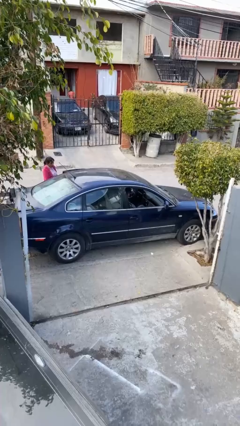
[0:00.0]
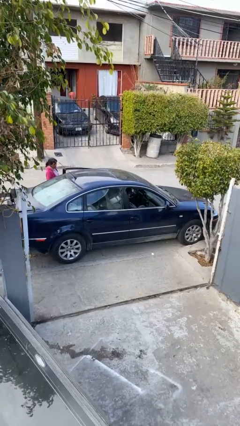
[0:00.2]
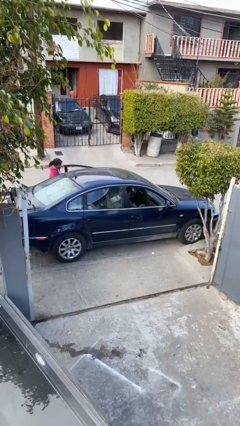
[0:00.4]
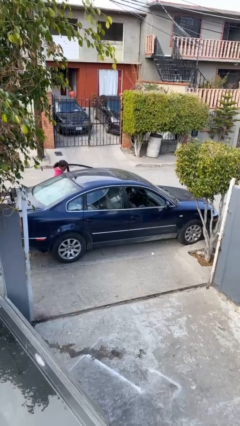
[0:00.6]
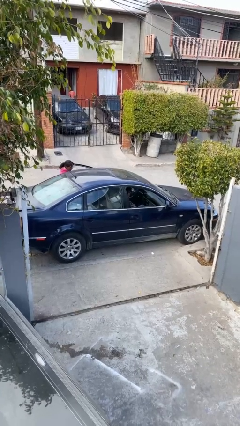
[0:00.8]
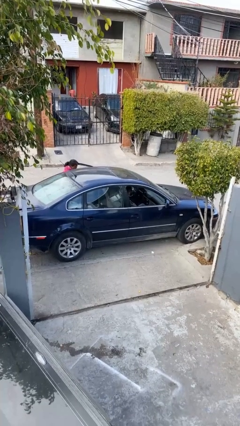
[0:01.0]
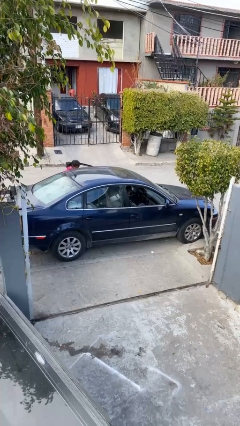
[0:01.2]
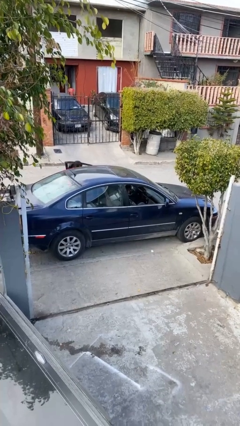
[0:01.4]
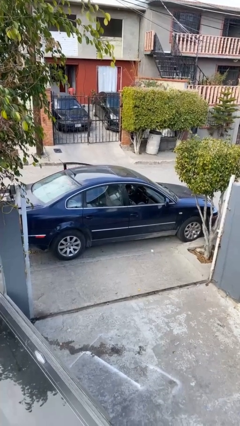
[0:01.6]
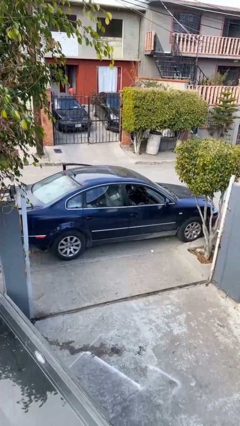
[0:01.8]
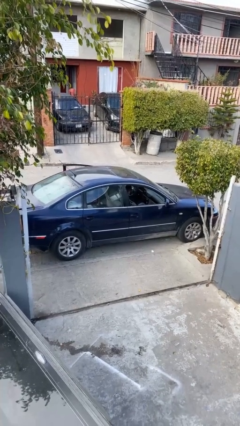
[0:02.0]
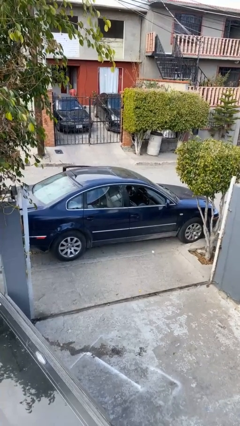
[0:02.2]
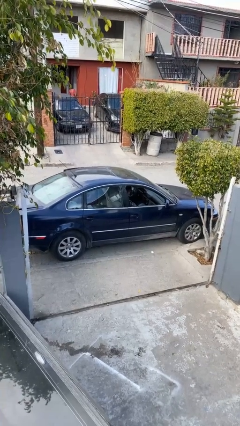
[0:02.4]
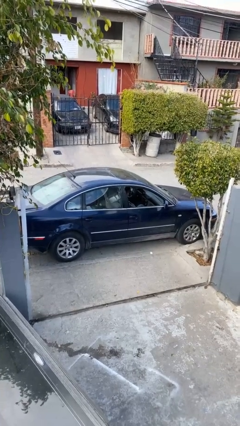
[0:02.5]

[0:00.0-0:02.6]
car picks up person

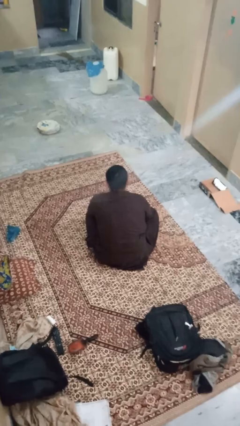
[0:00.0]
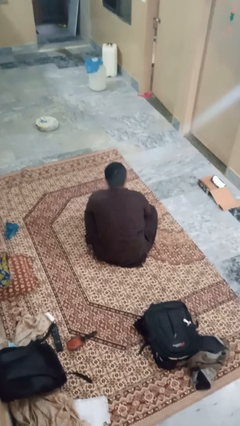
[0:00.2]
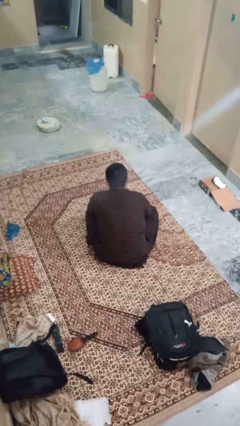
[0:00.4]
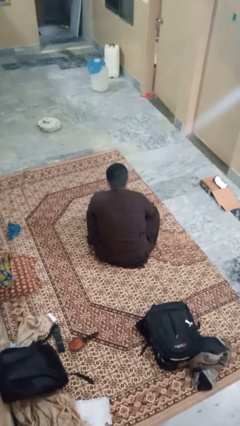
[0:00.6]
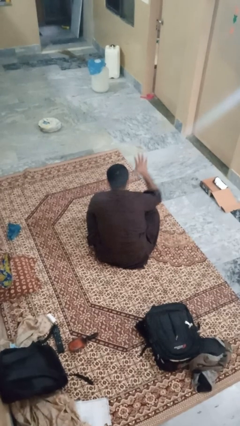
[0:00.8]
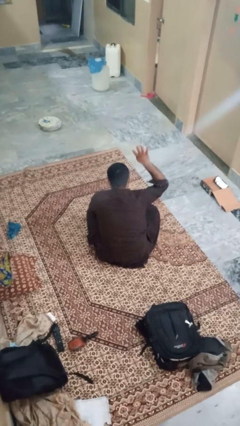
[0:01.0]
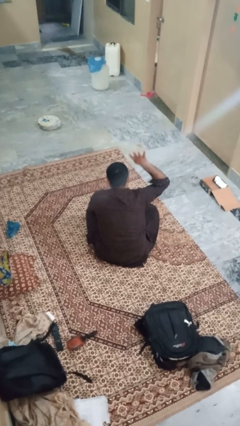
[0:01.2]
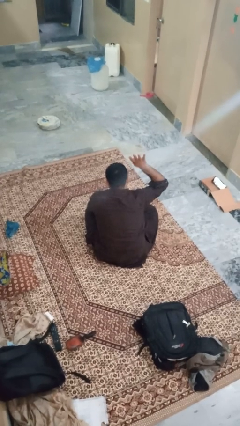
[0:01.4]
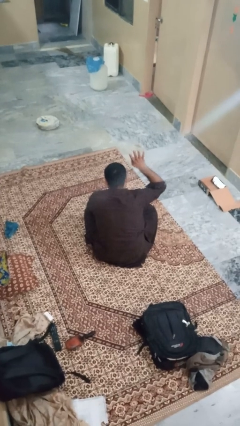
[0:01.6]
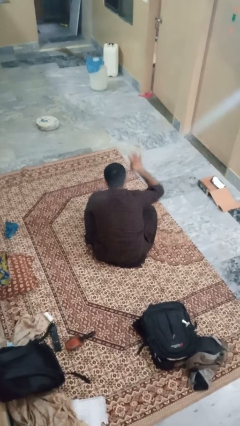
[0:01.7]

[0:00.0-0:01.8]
person gestures number four

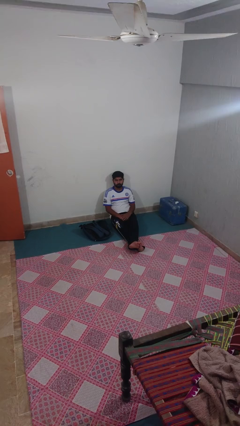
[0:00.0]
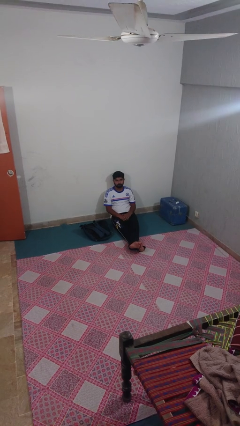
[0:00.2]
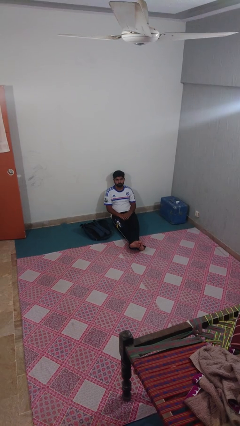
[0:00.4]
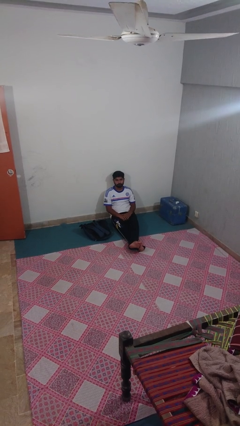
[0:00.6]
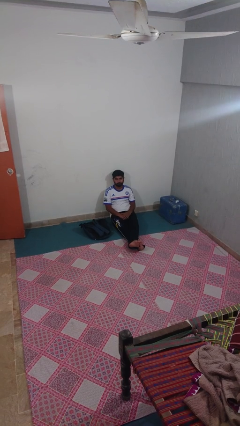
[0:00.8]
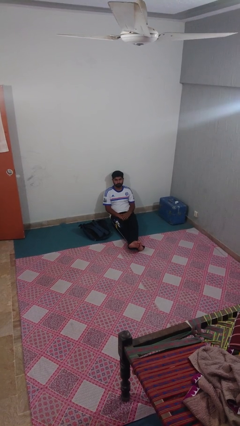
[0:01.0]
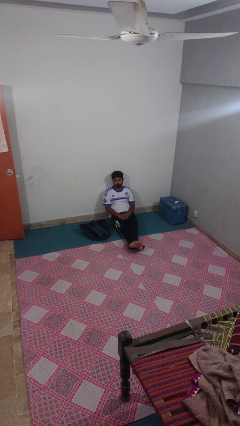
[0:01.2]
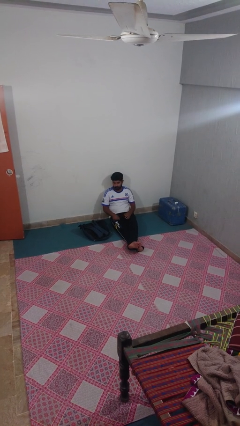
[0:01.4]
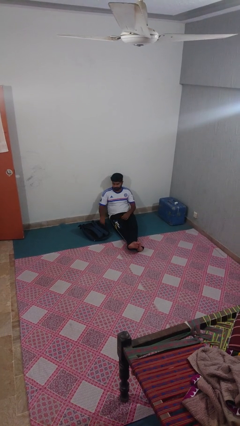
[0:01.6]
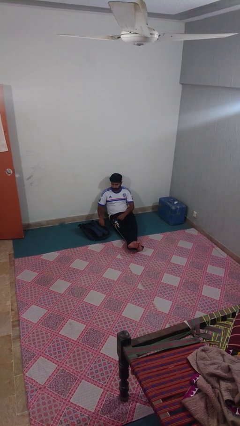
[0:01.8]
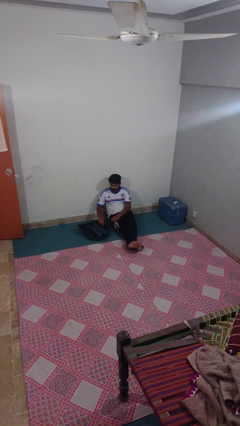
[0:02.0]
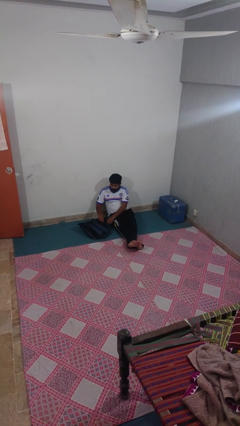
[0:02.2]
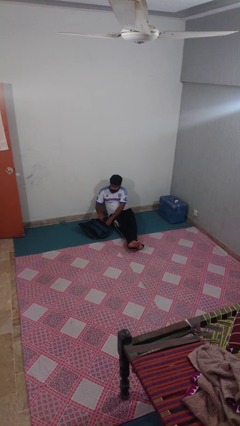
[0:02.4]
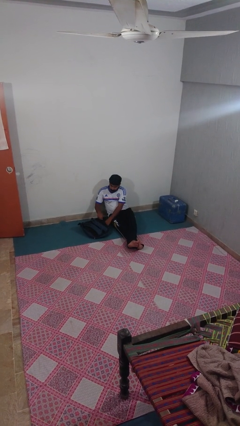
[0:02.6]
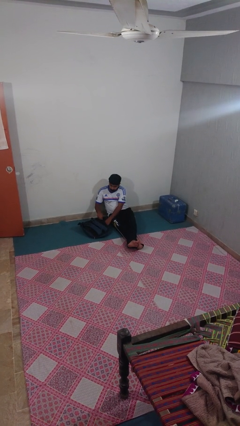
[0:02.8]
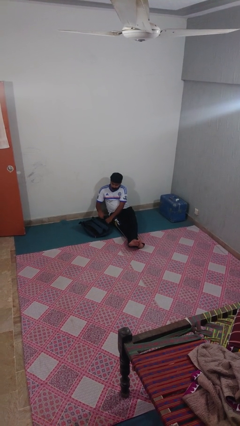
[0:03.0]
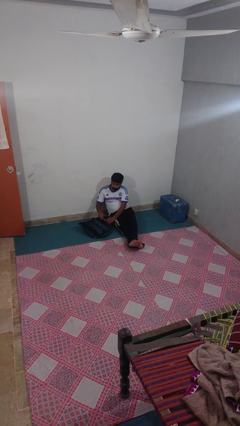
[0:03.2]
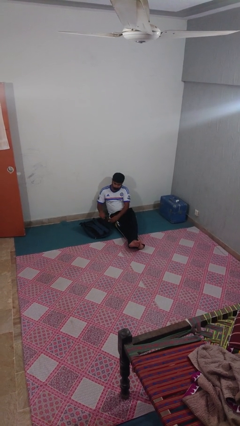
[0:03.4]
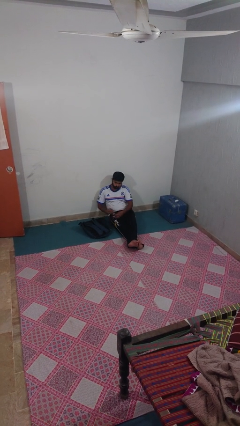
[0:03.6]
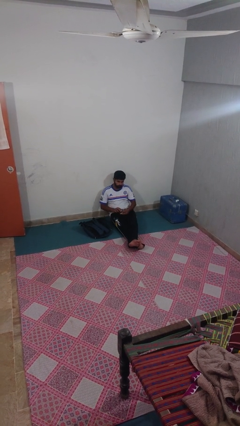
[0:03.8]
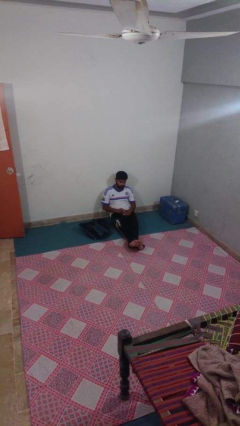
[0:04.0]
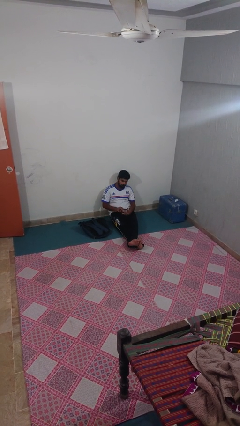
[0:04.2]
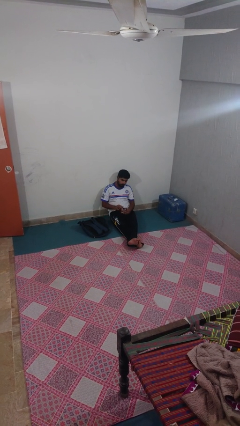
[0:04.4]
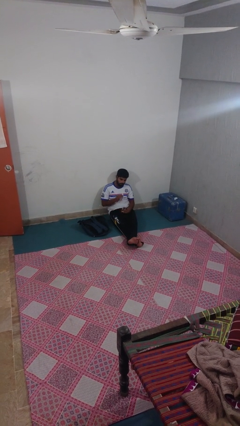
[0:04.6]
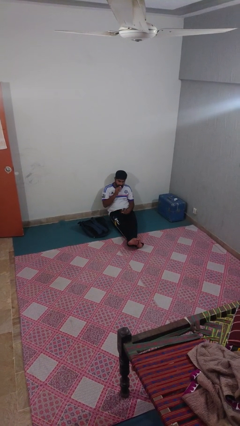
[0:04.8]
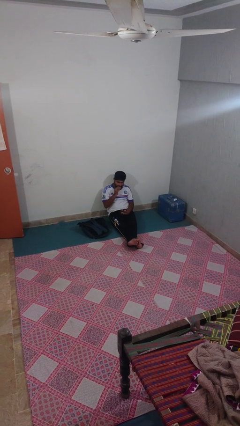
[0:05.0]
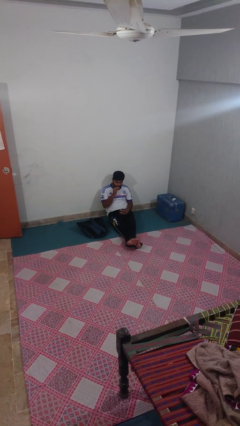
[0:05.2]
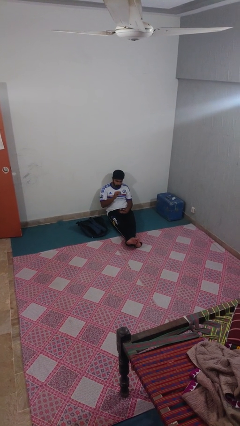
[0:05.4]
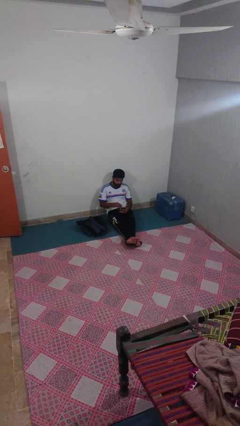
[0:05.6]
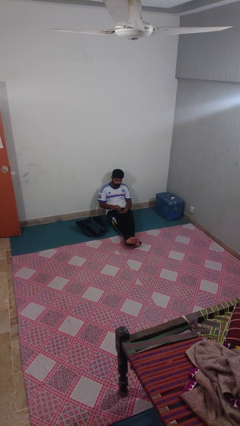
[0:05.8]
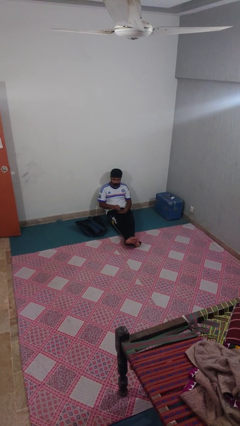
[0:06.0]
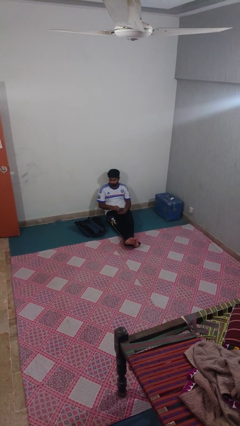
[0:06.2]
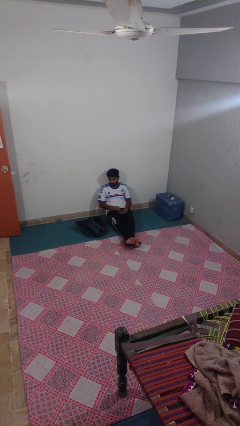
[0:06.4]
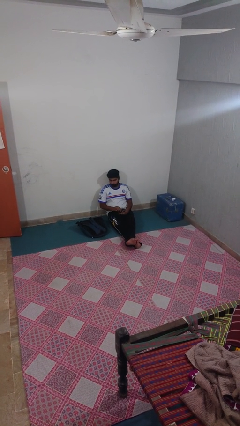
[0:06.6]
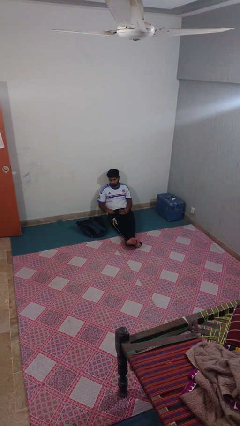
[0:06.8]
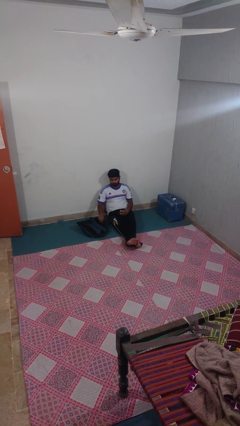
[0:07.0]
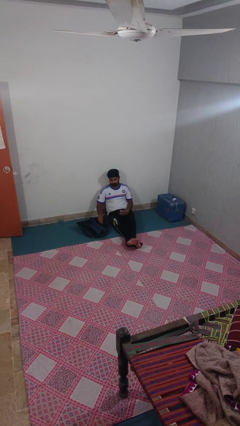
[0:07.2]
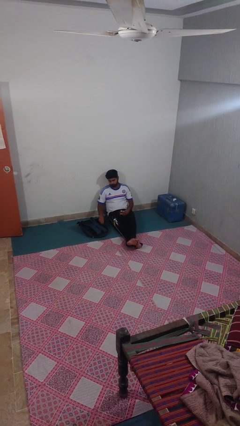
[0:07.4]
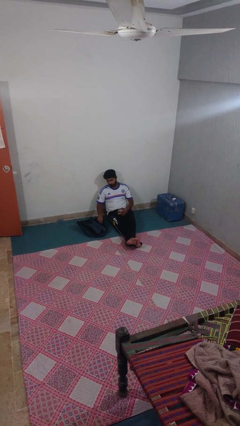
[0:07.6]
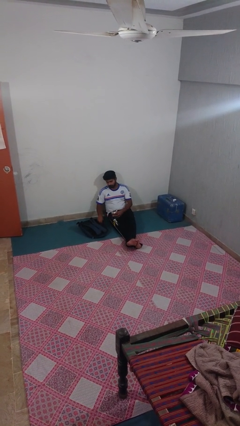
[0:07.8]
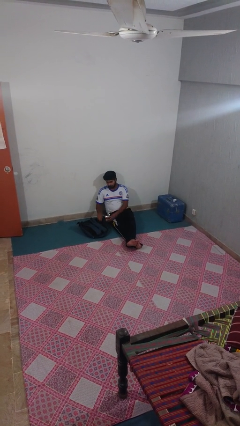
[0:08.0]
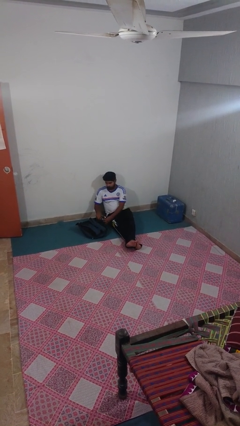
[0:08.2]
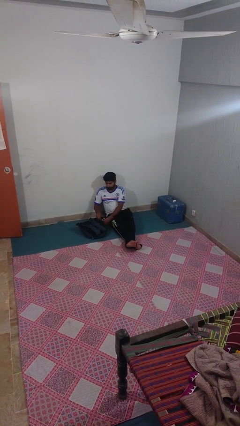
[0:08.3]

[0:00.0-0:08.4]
person eats snack from bag

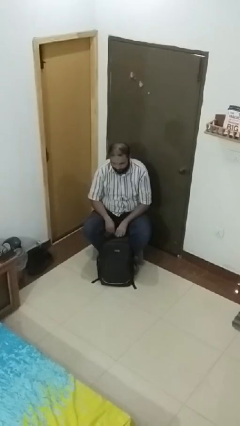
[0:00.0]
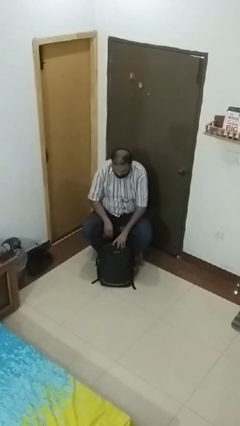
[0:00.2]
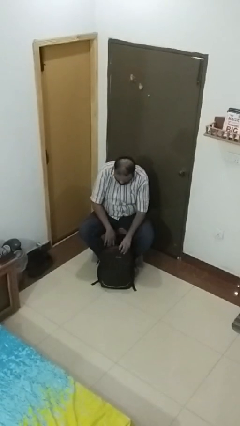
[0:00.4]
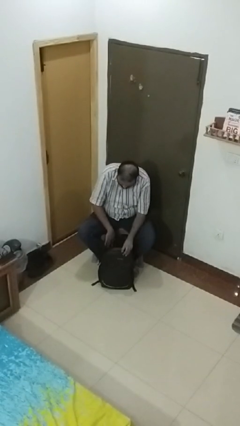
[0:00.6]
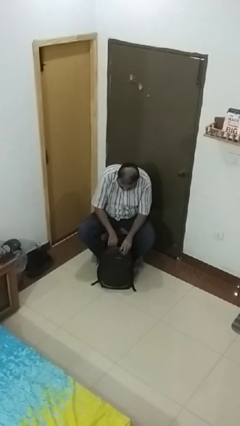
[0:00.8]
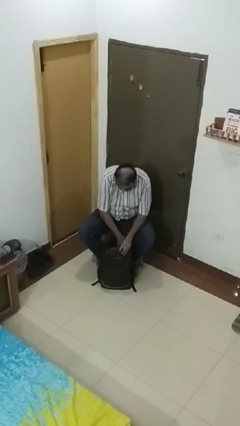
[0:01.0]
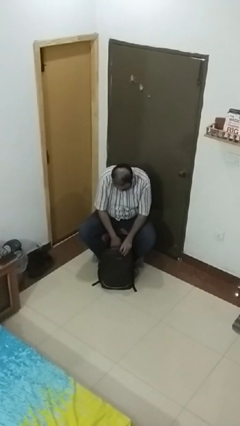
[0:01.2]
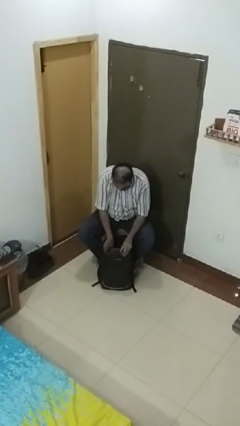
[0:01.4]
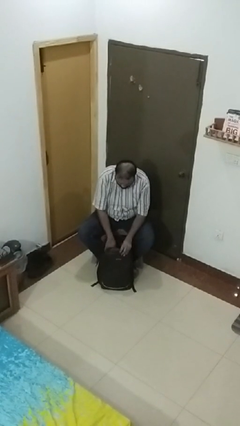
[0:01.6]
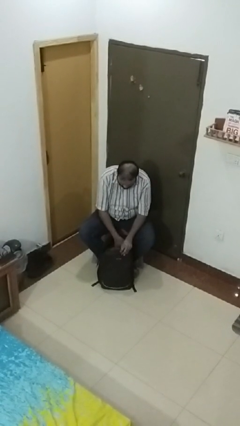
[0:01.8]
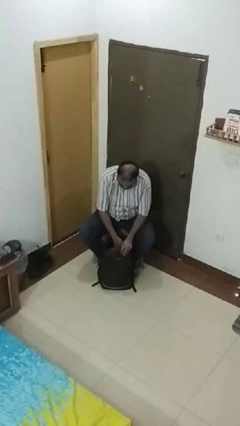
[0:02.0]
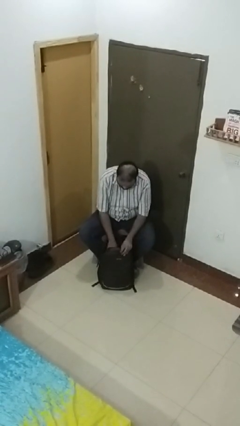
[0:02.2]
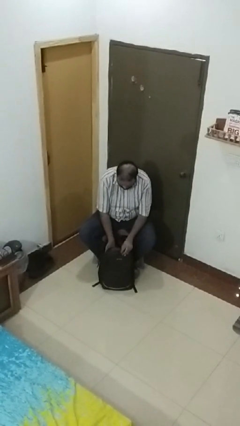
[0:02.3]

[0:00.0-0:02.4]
person searches in backpack

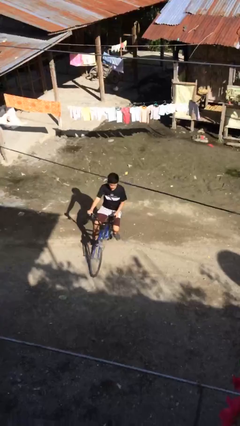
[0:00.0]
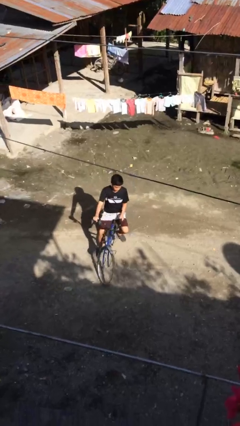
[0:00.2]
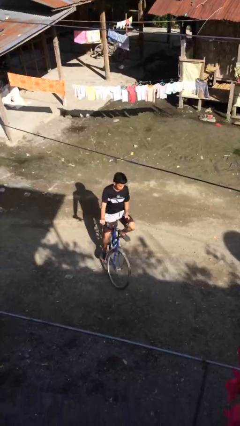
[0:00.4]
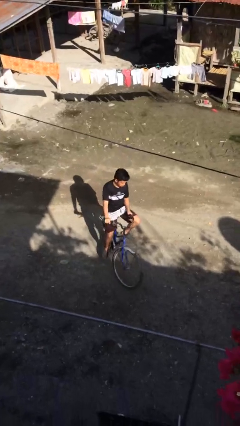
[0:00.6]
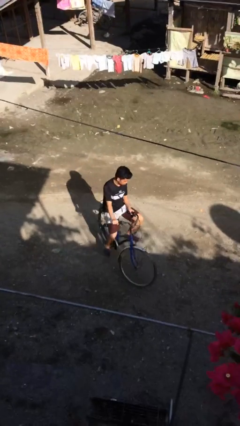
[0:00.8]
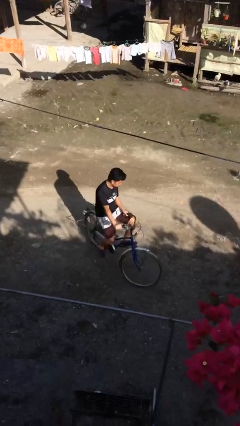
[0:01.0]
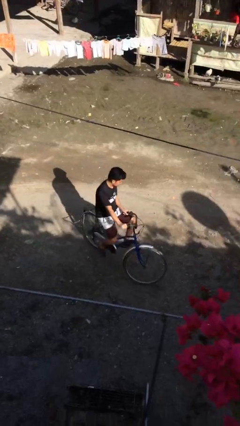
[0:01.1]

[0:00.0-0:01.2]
person rides bicycle

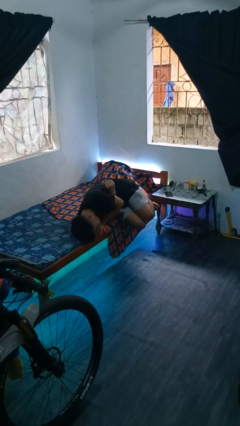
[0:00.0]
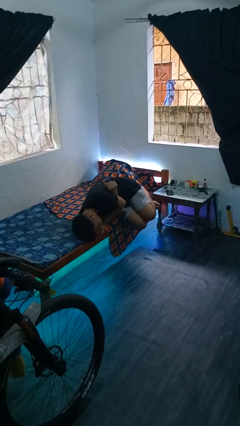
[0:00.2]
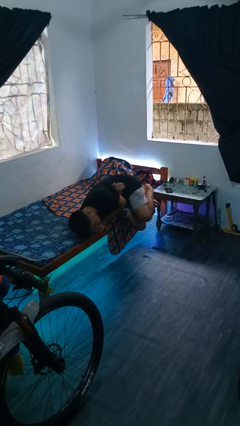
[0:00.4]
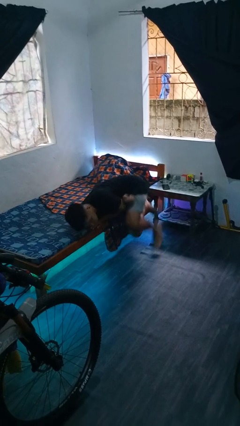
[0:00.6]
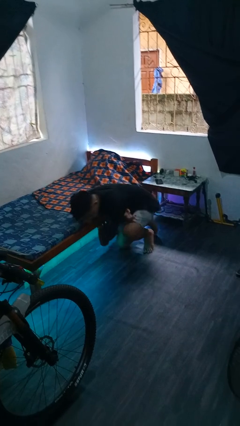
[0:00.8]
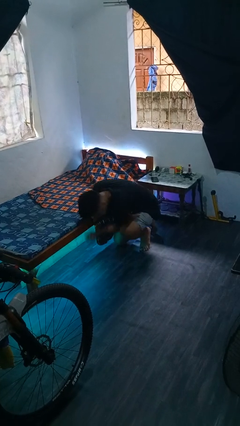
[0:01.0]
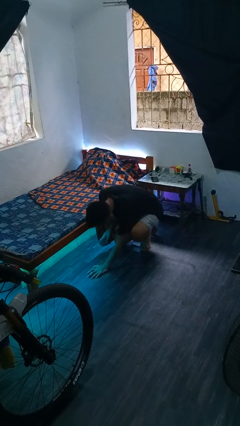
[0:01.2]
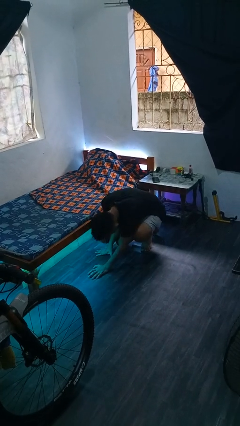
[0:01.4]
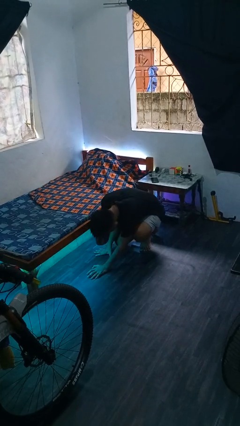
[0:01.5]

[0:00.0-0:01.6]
person falls from bed
